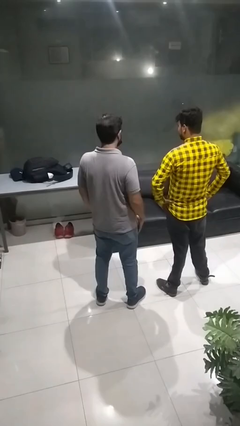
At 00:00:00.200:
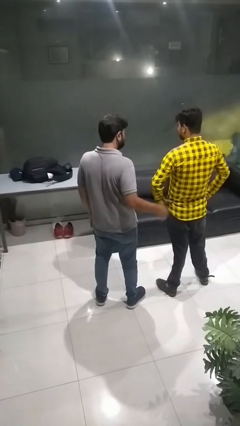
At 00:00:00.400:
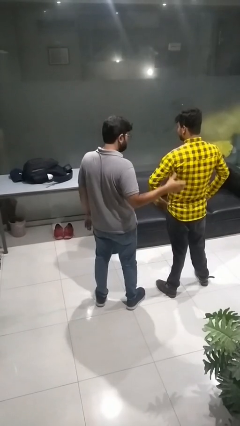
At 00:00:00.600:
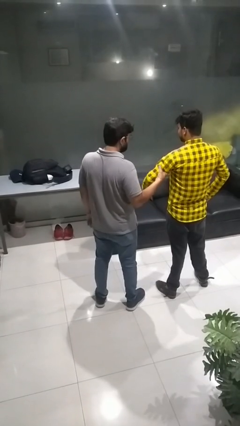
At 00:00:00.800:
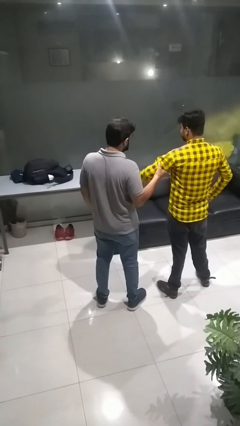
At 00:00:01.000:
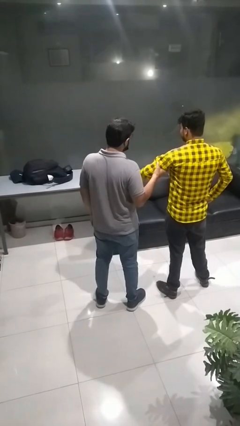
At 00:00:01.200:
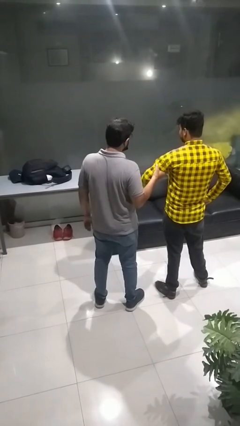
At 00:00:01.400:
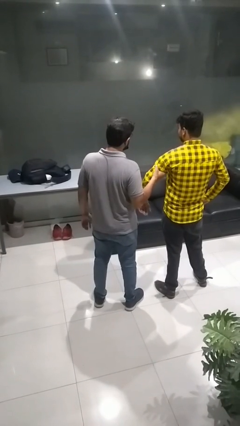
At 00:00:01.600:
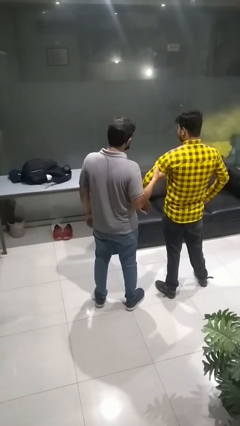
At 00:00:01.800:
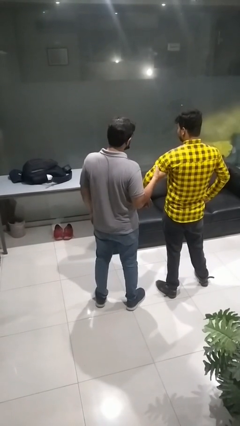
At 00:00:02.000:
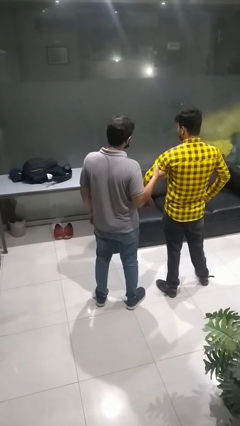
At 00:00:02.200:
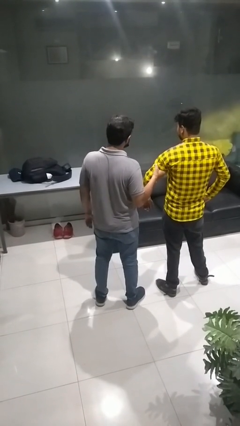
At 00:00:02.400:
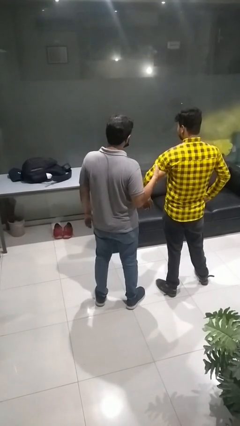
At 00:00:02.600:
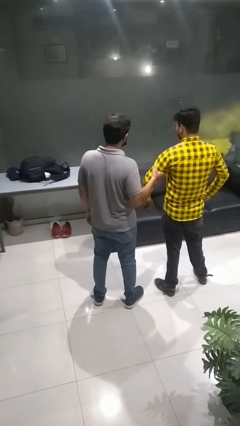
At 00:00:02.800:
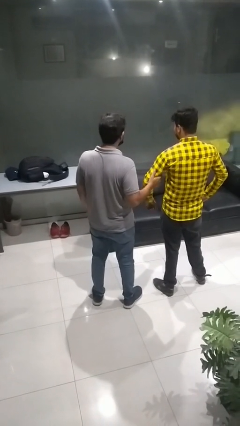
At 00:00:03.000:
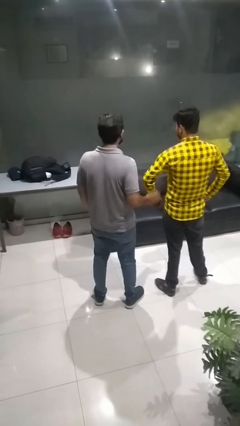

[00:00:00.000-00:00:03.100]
person grabs person by bicep

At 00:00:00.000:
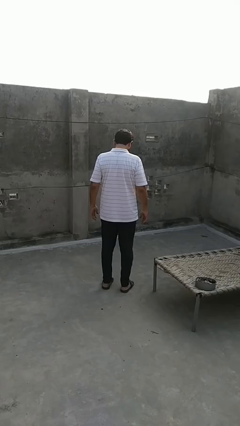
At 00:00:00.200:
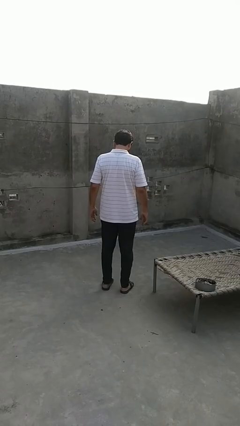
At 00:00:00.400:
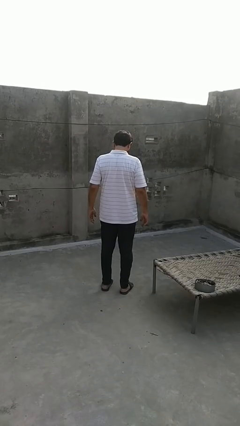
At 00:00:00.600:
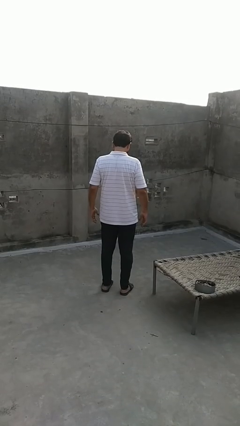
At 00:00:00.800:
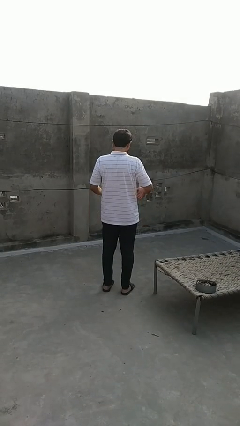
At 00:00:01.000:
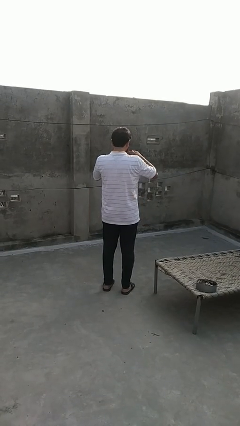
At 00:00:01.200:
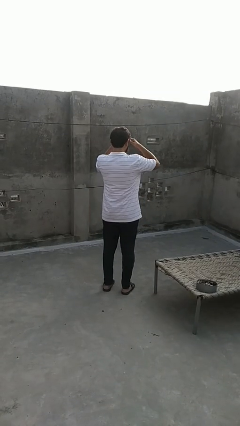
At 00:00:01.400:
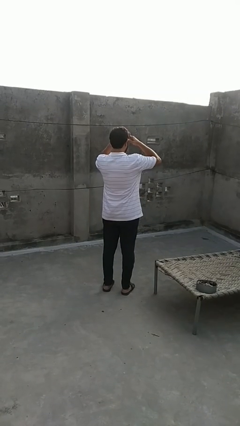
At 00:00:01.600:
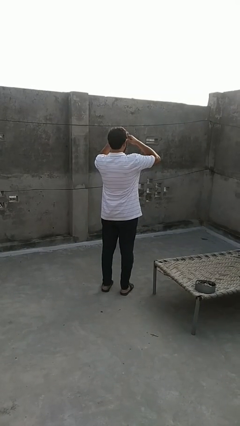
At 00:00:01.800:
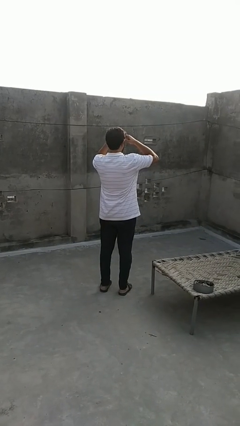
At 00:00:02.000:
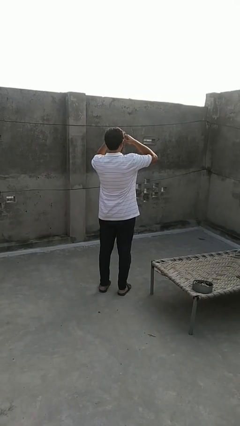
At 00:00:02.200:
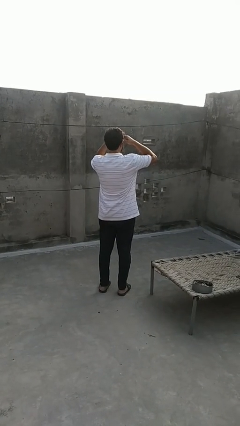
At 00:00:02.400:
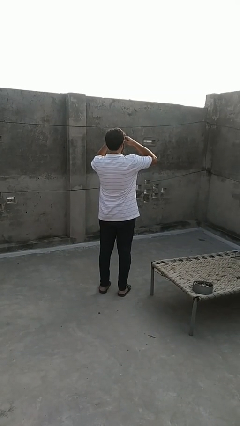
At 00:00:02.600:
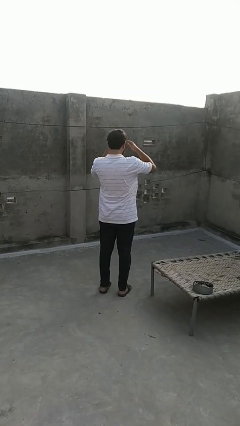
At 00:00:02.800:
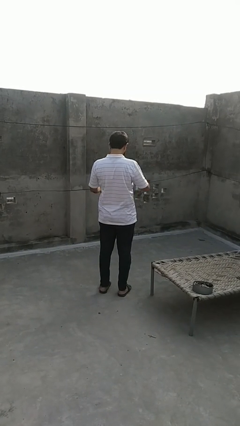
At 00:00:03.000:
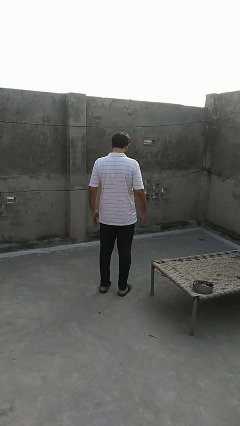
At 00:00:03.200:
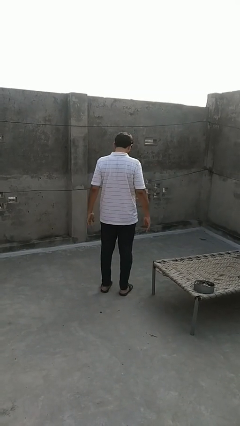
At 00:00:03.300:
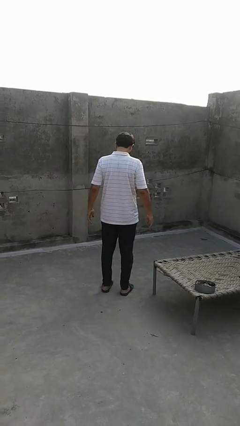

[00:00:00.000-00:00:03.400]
person shades eyes

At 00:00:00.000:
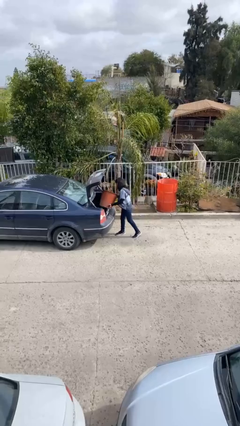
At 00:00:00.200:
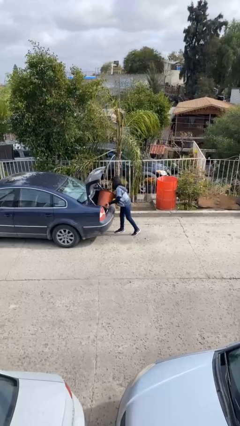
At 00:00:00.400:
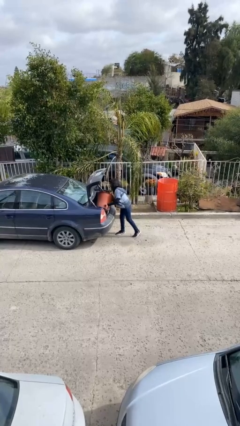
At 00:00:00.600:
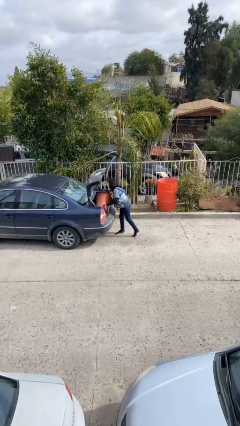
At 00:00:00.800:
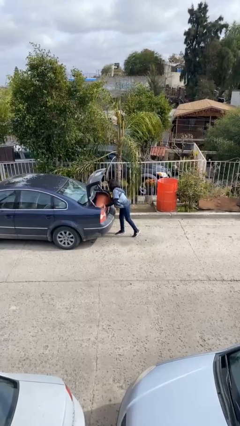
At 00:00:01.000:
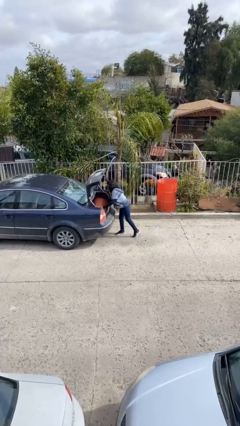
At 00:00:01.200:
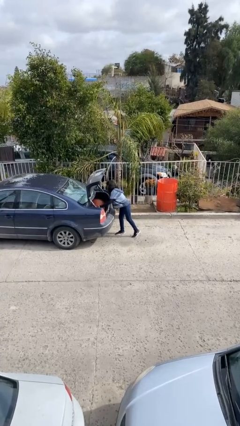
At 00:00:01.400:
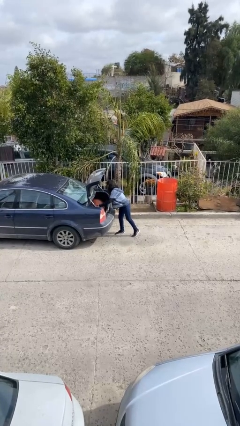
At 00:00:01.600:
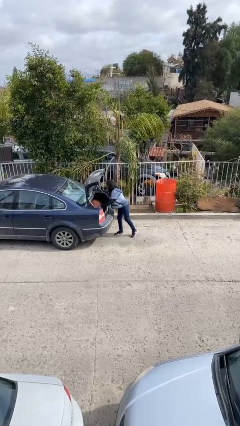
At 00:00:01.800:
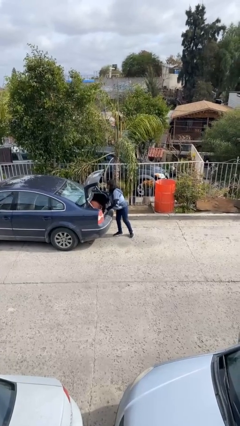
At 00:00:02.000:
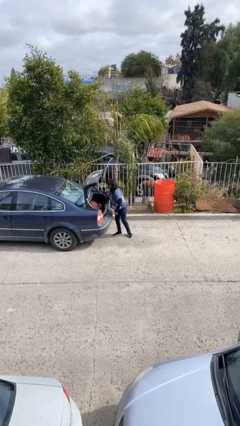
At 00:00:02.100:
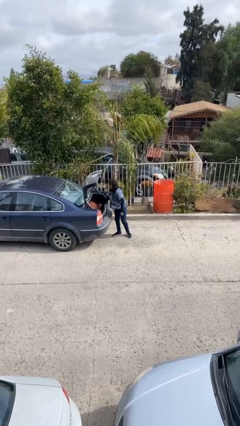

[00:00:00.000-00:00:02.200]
person loads car

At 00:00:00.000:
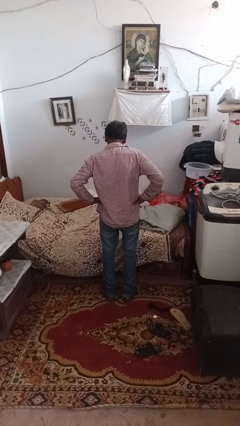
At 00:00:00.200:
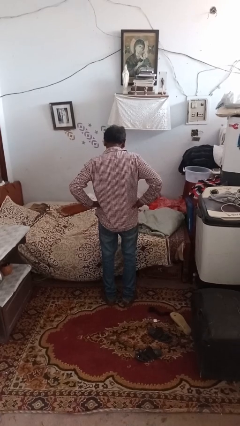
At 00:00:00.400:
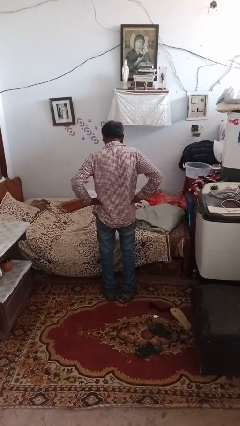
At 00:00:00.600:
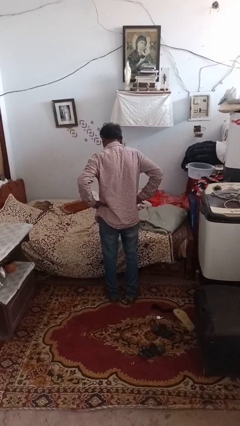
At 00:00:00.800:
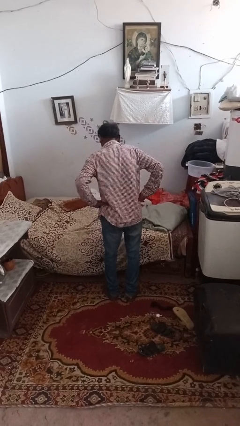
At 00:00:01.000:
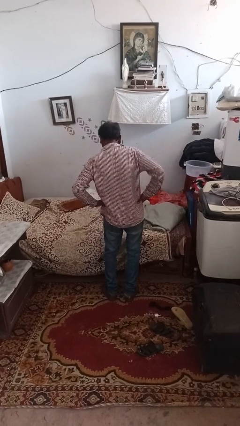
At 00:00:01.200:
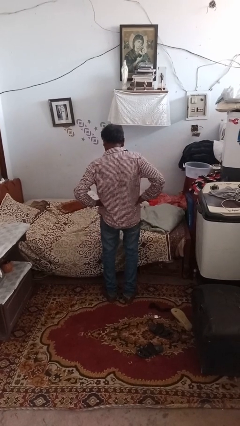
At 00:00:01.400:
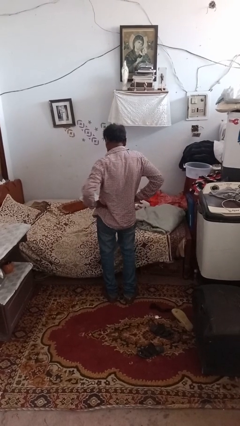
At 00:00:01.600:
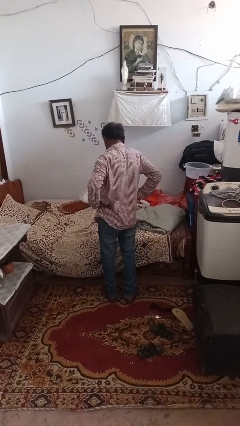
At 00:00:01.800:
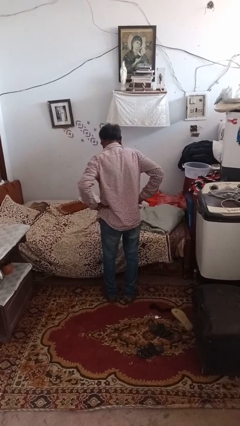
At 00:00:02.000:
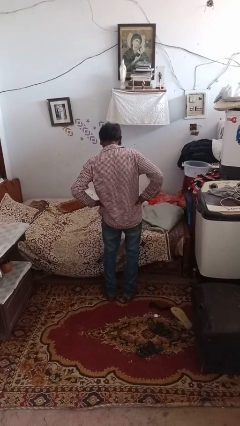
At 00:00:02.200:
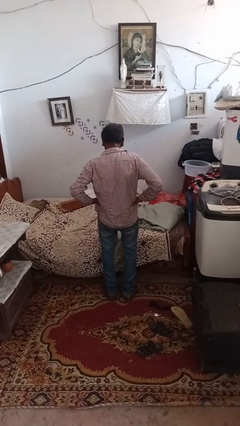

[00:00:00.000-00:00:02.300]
person wiggles hips

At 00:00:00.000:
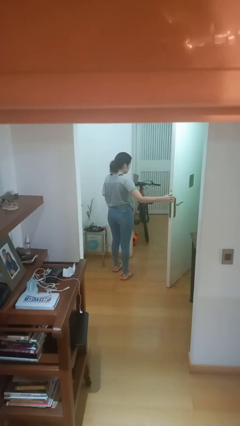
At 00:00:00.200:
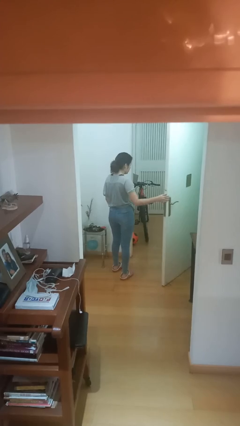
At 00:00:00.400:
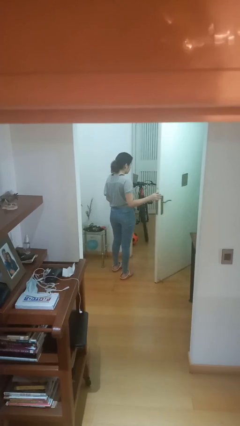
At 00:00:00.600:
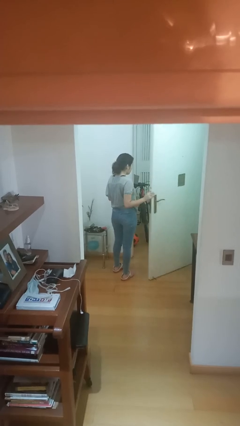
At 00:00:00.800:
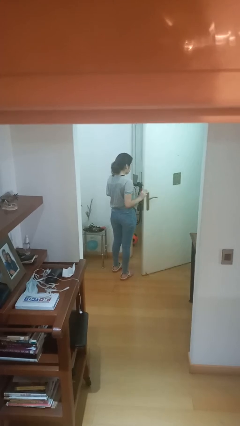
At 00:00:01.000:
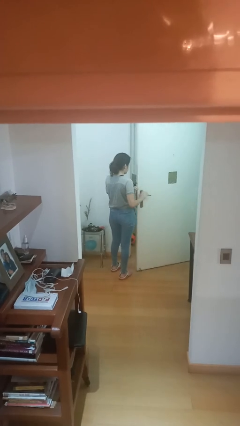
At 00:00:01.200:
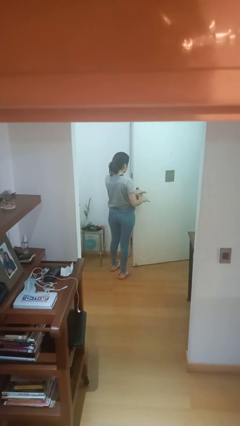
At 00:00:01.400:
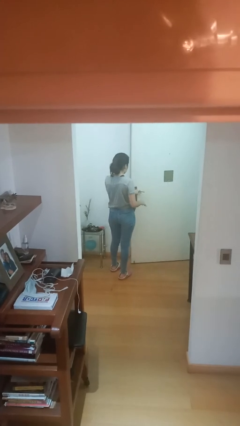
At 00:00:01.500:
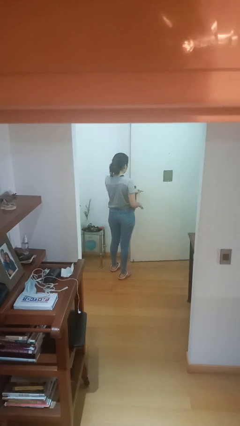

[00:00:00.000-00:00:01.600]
person closes facility door

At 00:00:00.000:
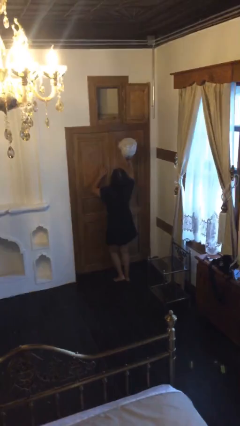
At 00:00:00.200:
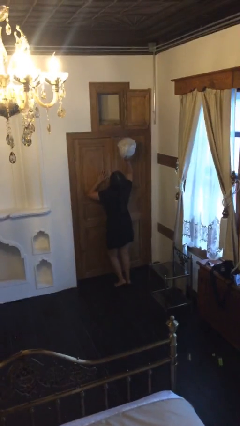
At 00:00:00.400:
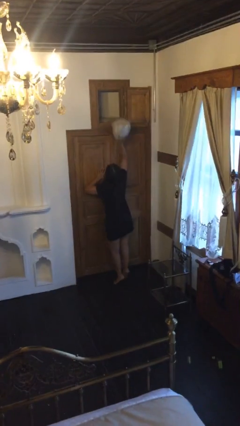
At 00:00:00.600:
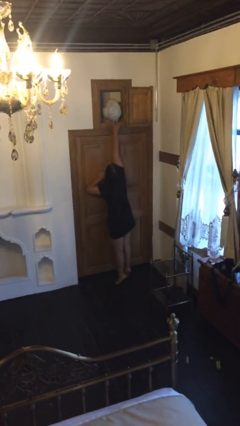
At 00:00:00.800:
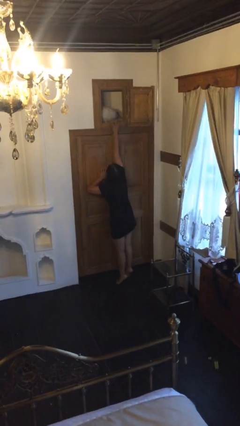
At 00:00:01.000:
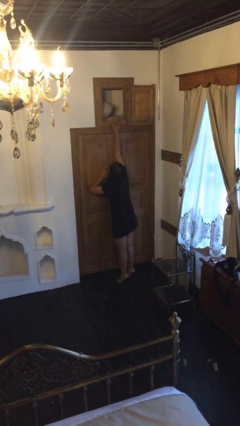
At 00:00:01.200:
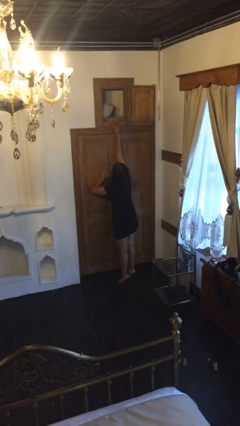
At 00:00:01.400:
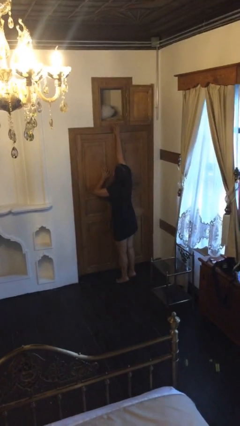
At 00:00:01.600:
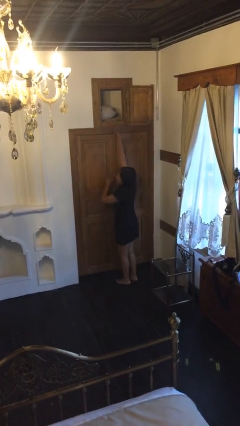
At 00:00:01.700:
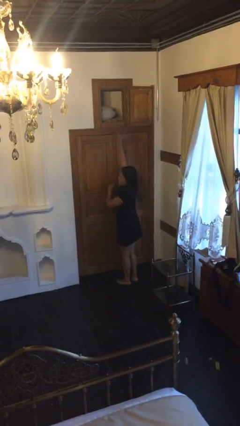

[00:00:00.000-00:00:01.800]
person puts down object on shelf

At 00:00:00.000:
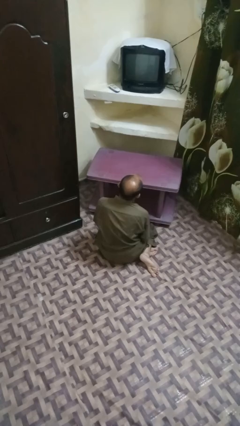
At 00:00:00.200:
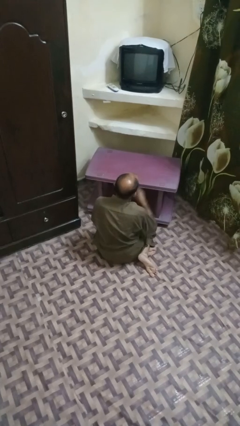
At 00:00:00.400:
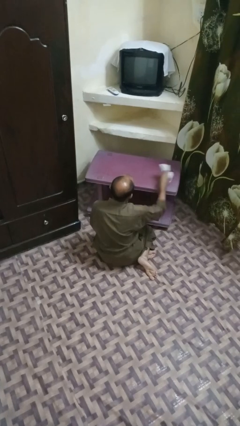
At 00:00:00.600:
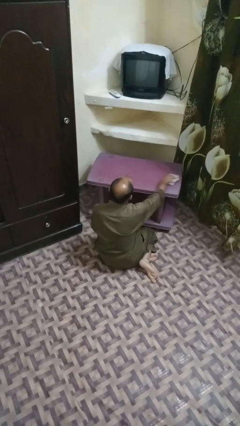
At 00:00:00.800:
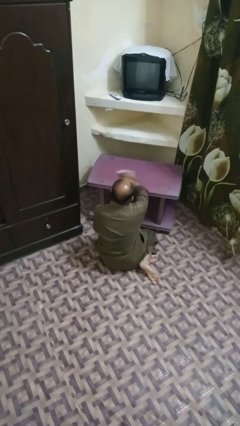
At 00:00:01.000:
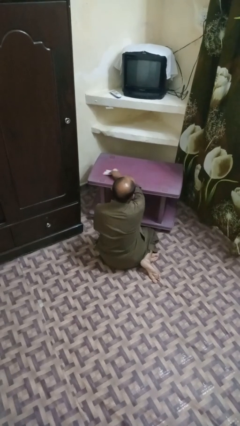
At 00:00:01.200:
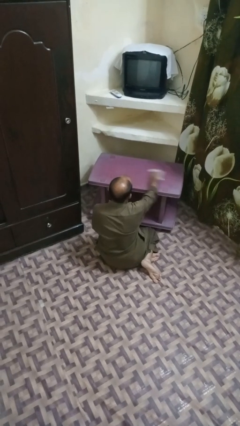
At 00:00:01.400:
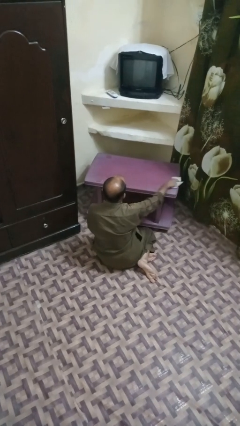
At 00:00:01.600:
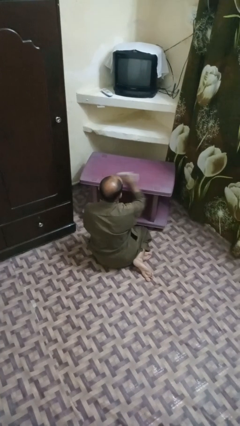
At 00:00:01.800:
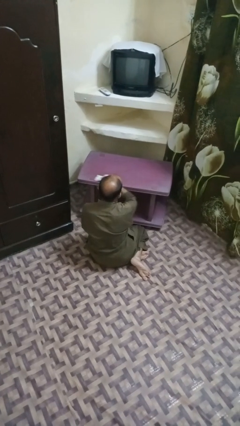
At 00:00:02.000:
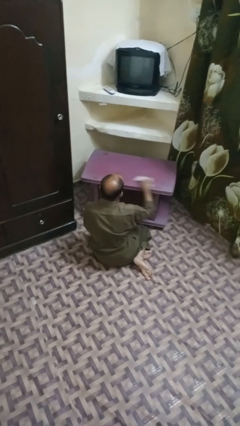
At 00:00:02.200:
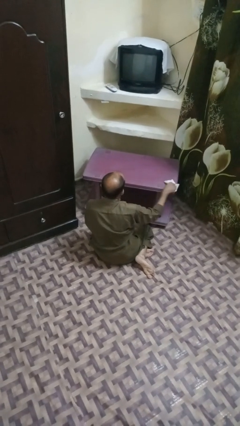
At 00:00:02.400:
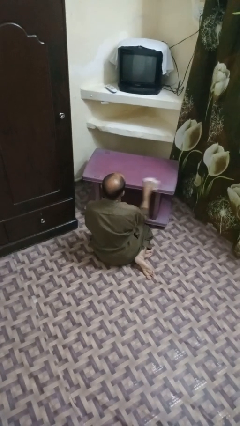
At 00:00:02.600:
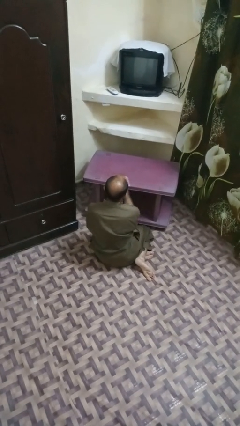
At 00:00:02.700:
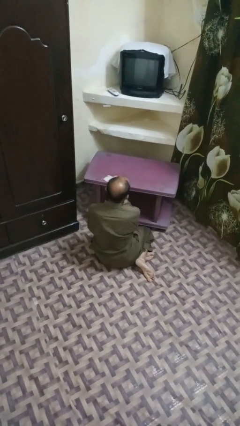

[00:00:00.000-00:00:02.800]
person cleans table with rag
